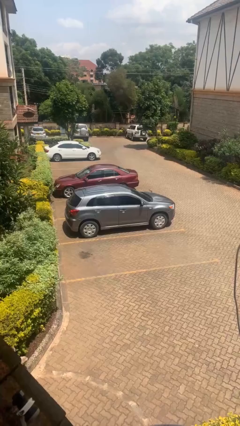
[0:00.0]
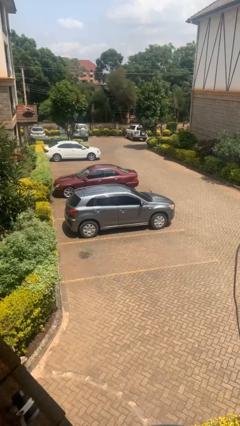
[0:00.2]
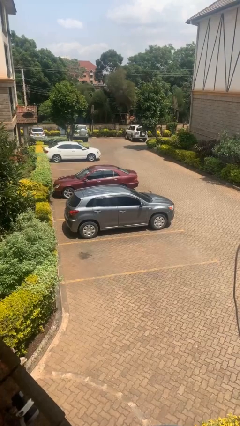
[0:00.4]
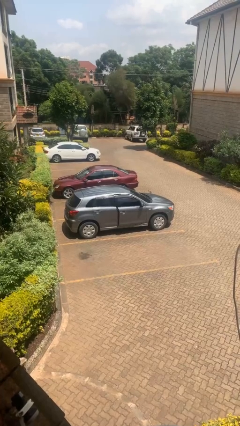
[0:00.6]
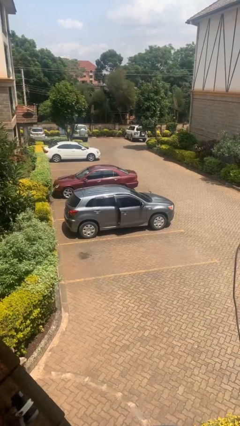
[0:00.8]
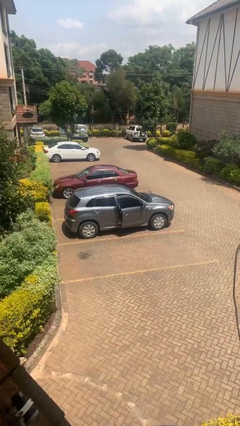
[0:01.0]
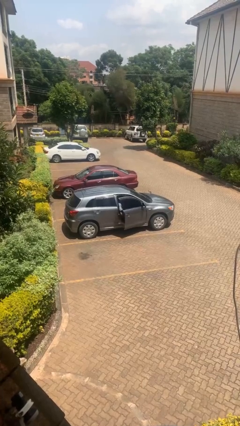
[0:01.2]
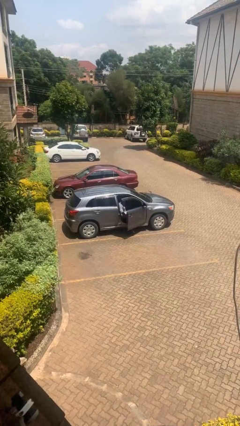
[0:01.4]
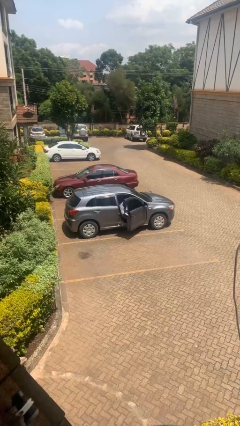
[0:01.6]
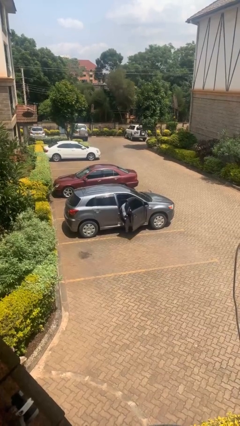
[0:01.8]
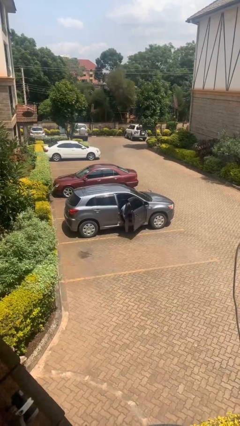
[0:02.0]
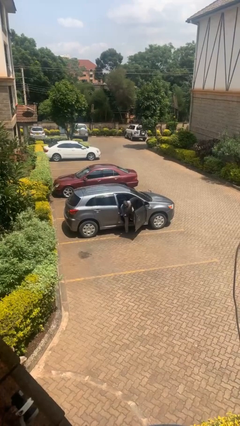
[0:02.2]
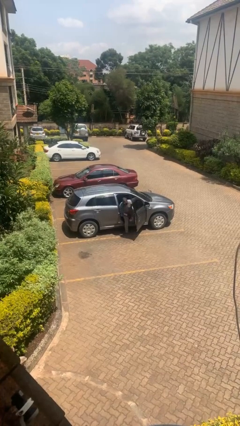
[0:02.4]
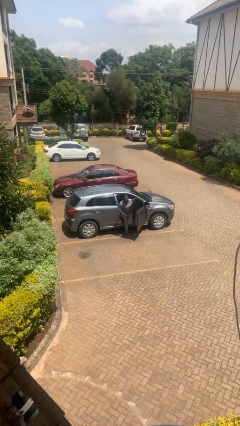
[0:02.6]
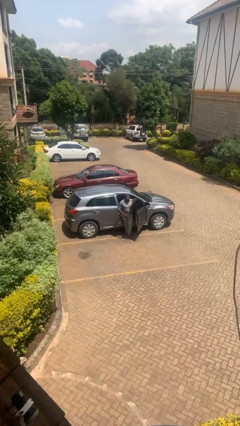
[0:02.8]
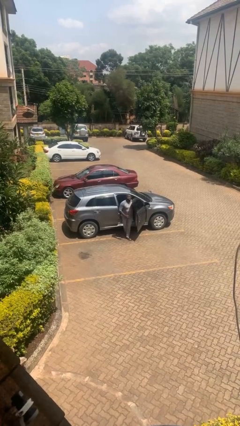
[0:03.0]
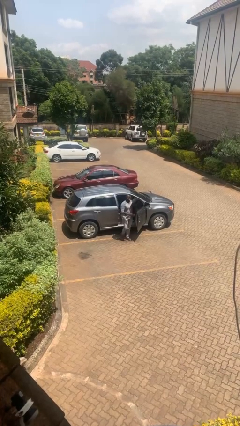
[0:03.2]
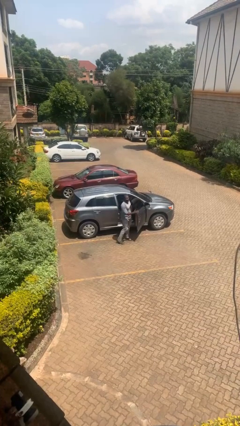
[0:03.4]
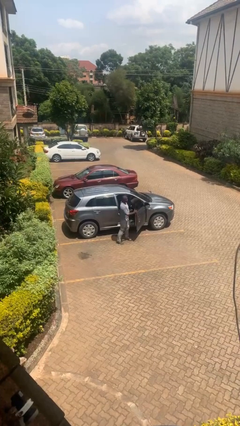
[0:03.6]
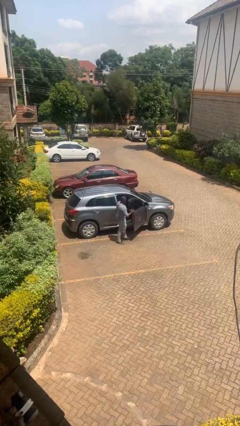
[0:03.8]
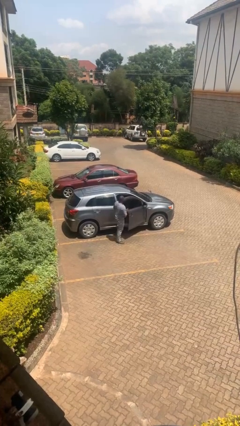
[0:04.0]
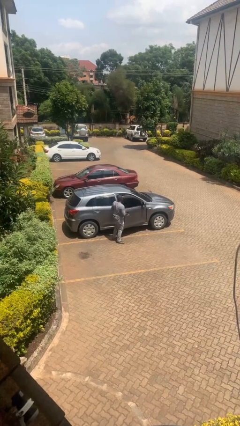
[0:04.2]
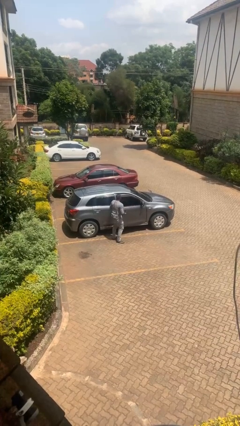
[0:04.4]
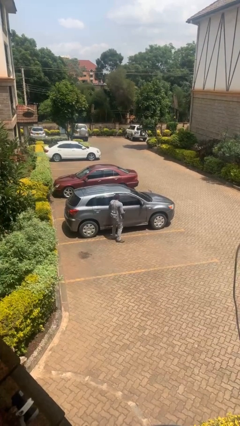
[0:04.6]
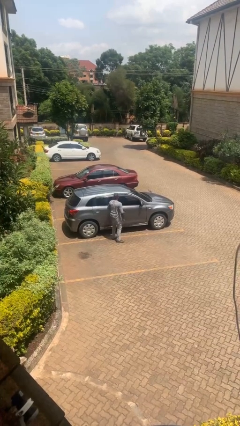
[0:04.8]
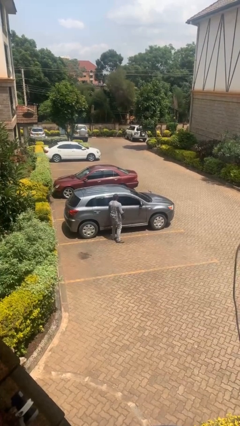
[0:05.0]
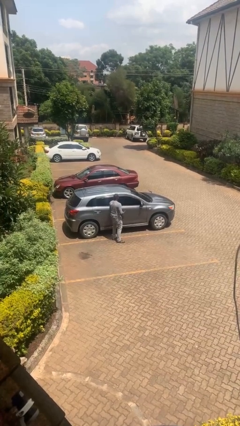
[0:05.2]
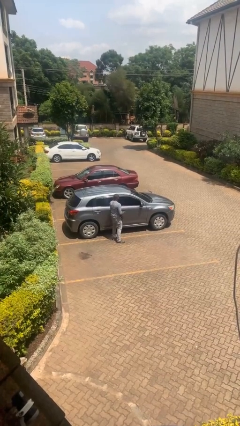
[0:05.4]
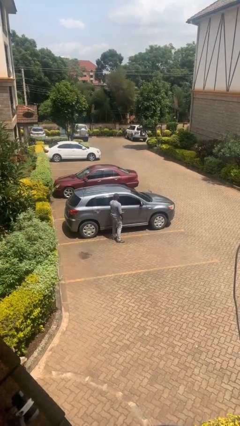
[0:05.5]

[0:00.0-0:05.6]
car drops off person

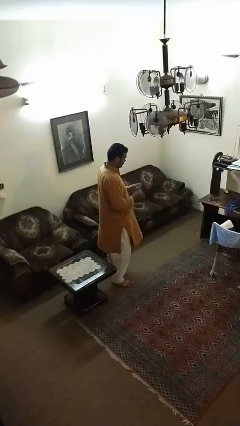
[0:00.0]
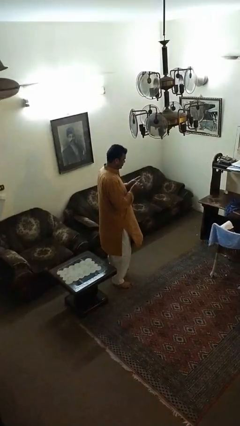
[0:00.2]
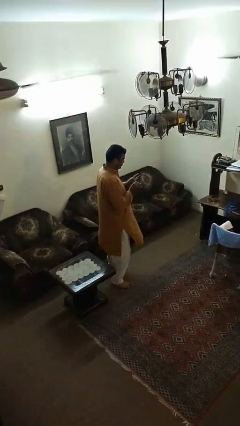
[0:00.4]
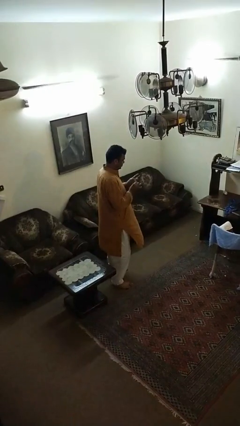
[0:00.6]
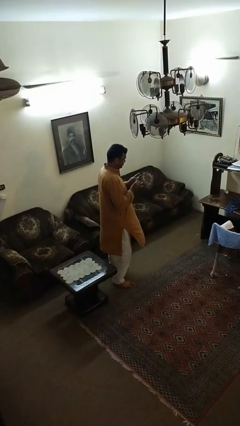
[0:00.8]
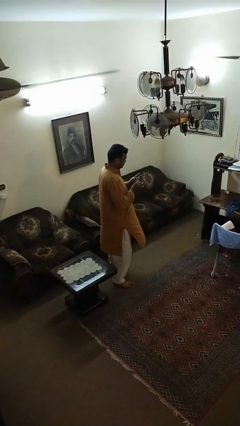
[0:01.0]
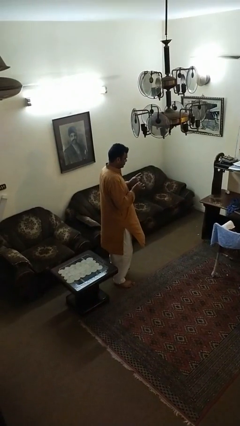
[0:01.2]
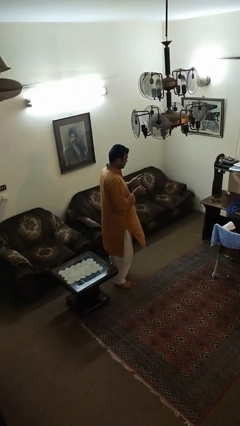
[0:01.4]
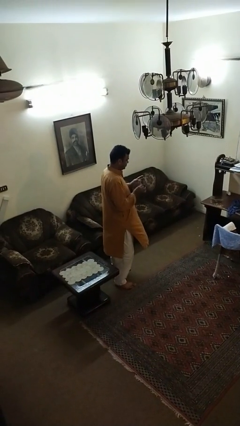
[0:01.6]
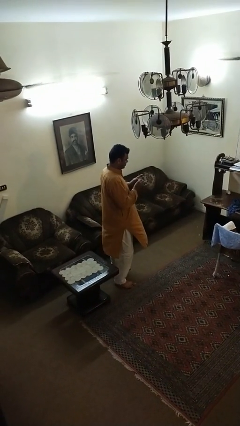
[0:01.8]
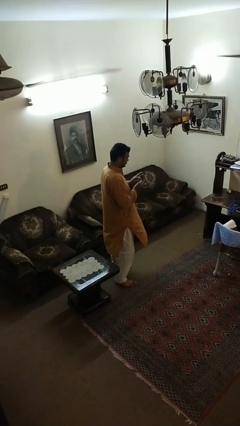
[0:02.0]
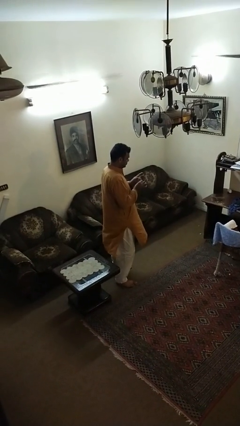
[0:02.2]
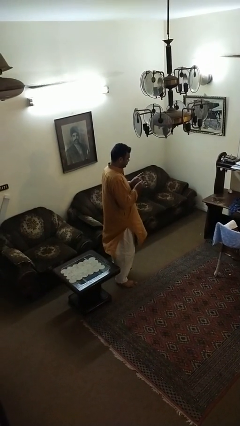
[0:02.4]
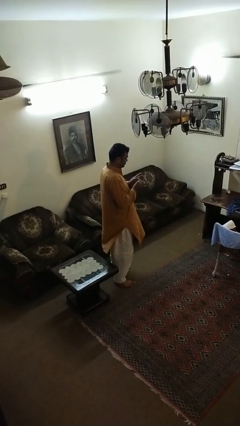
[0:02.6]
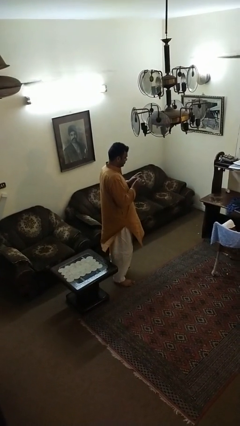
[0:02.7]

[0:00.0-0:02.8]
person files fingernails

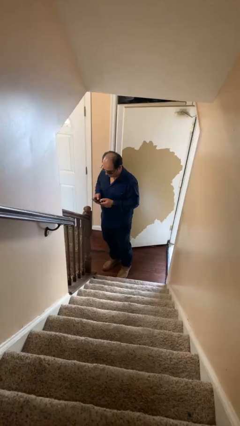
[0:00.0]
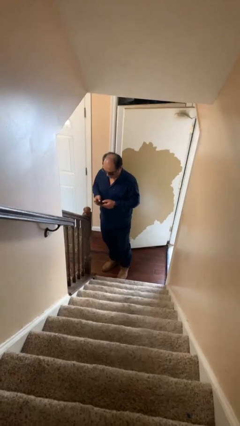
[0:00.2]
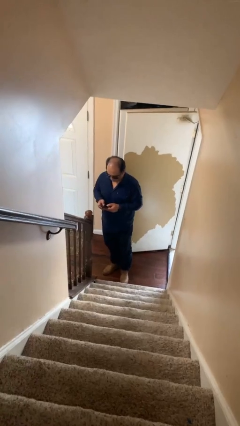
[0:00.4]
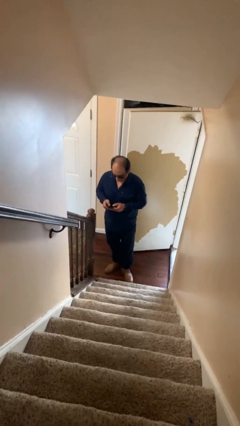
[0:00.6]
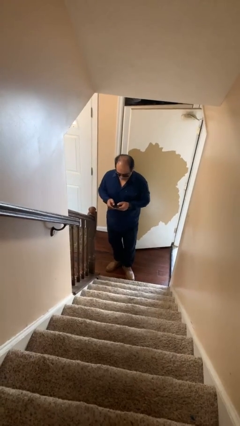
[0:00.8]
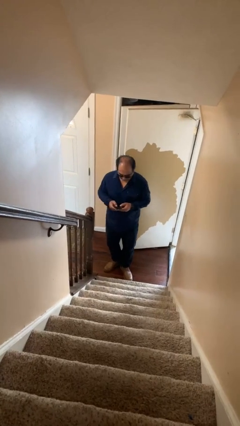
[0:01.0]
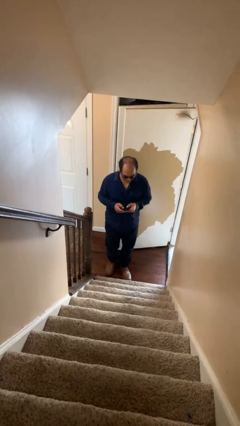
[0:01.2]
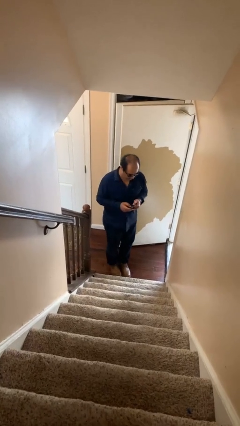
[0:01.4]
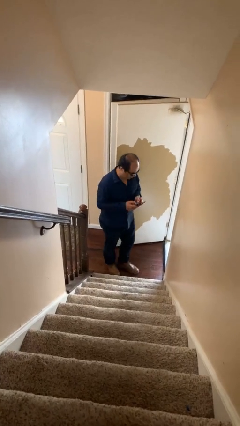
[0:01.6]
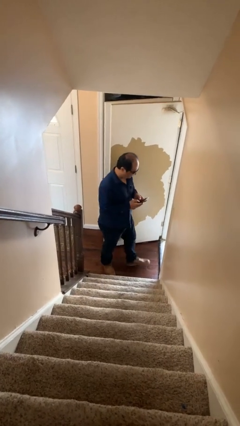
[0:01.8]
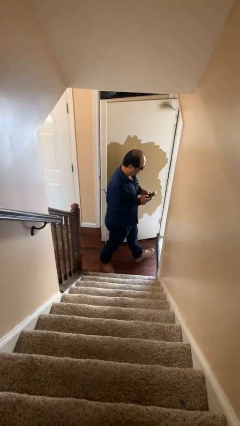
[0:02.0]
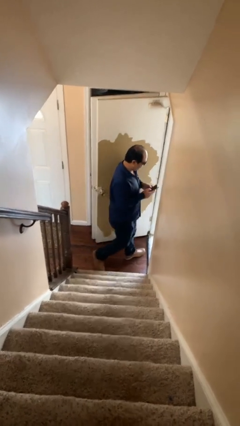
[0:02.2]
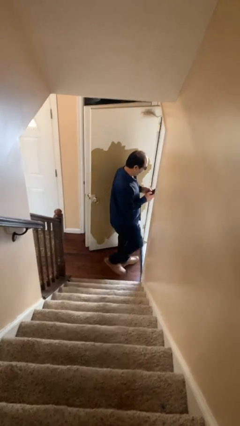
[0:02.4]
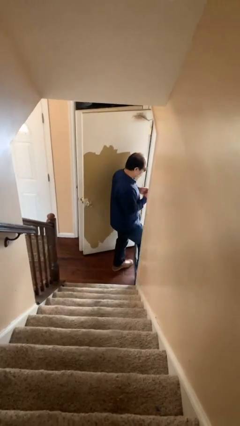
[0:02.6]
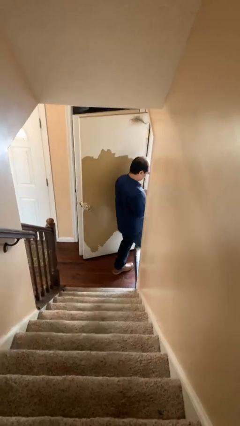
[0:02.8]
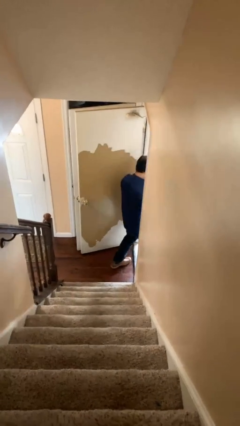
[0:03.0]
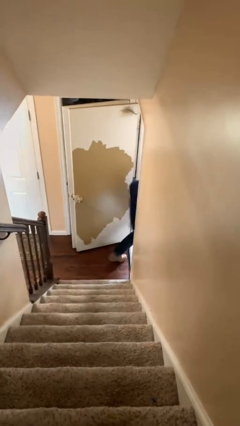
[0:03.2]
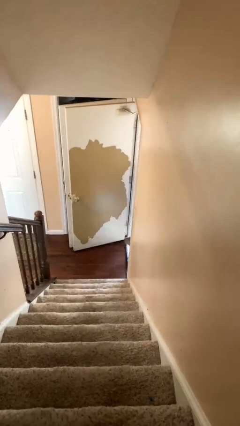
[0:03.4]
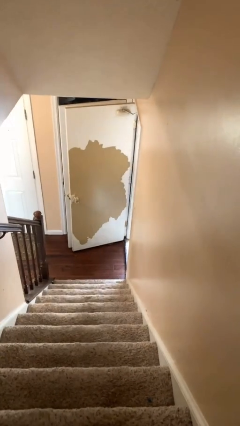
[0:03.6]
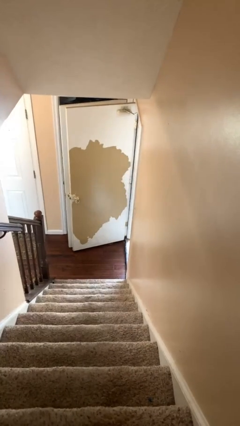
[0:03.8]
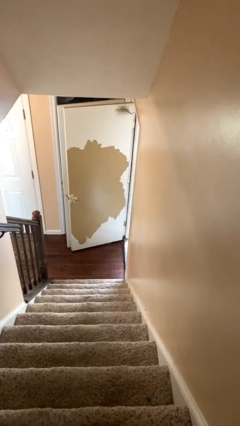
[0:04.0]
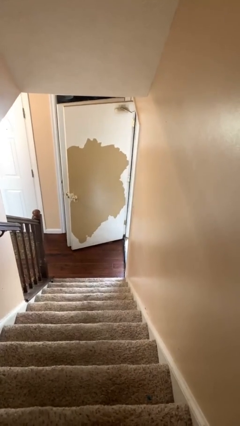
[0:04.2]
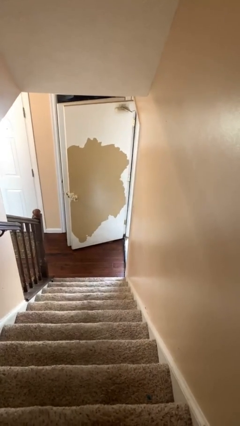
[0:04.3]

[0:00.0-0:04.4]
person exits scene through structure

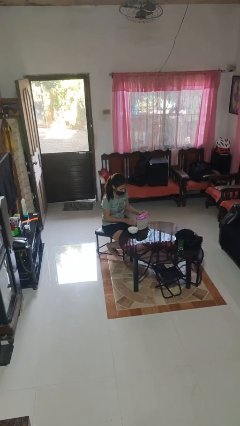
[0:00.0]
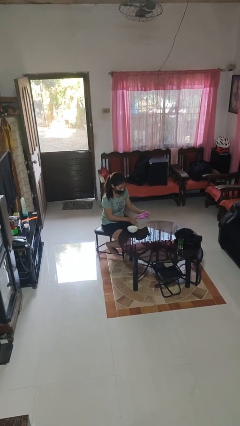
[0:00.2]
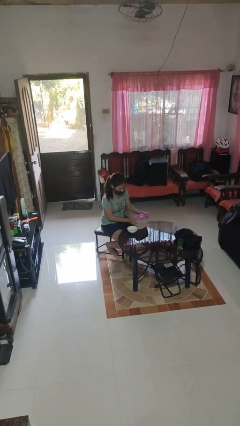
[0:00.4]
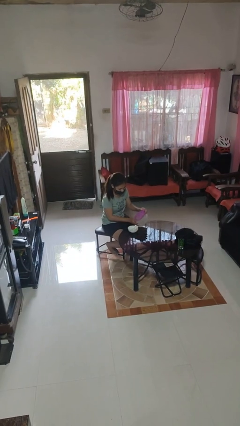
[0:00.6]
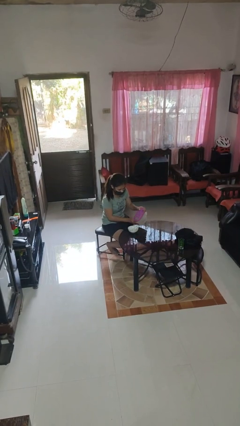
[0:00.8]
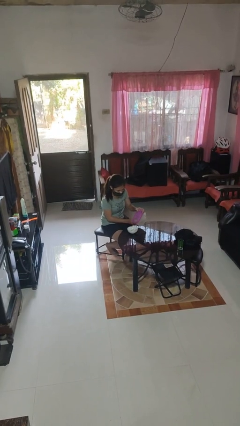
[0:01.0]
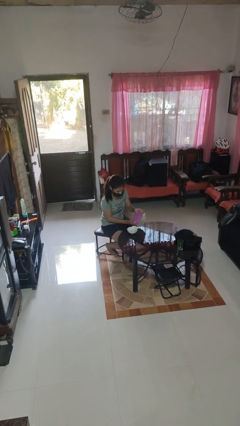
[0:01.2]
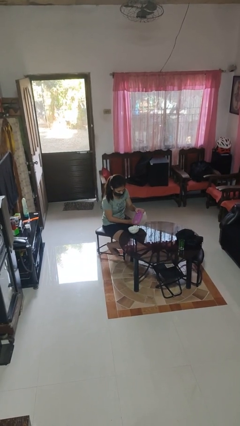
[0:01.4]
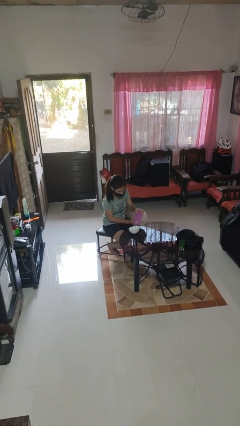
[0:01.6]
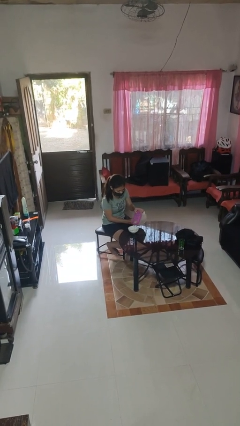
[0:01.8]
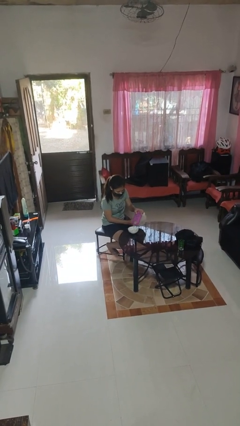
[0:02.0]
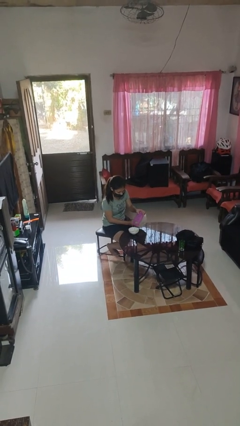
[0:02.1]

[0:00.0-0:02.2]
person pours into bowl

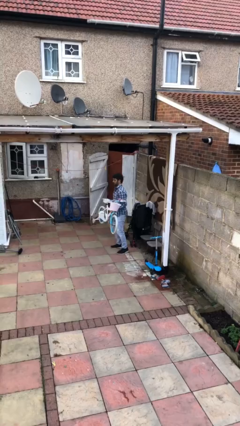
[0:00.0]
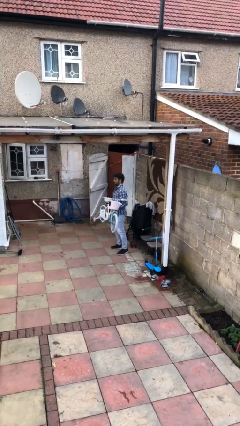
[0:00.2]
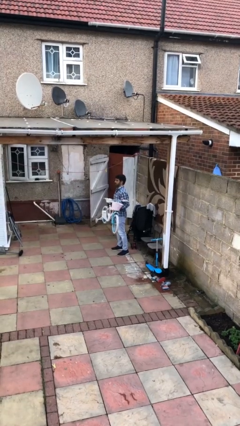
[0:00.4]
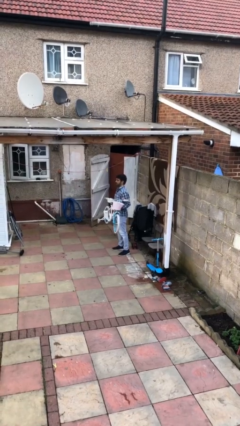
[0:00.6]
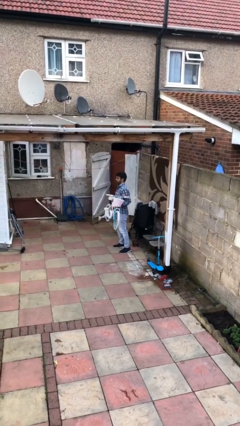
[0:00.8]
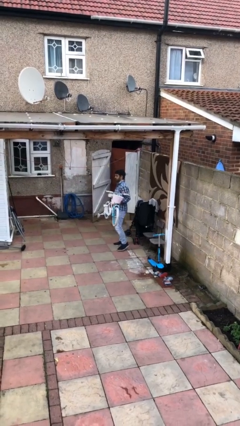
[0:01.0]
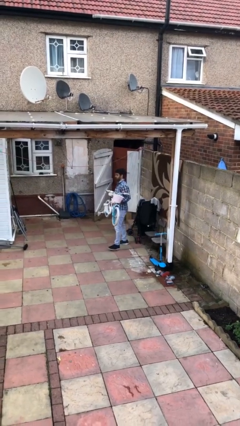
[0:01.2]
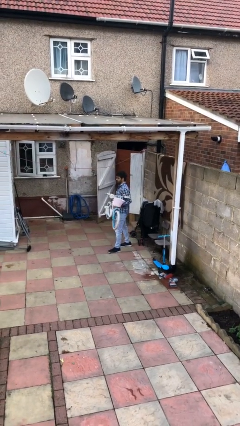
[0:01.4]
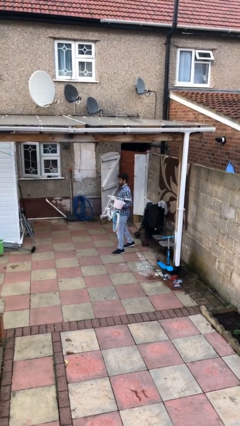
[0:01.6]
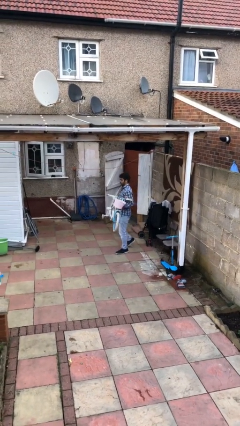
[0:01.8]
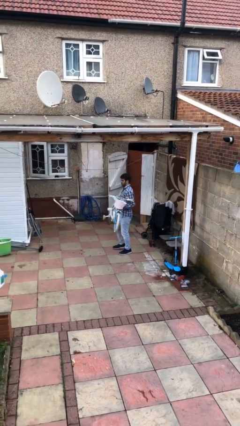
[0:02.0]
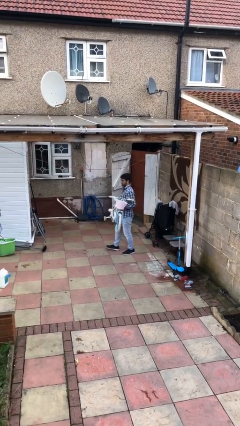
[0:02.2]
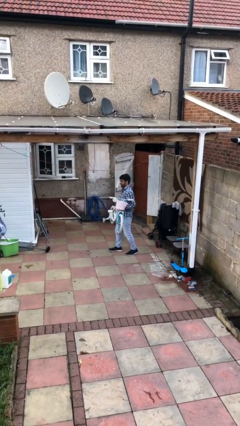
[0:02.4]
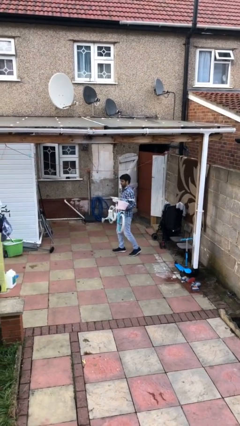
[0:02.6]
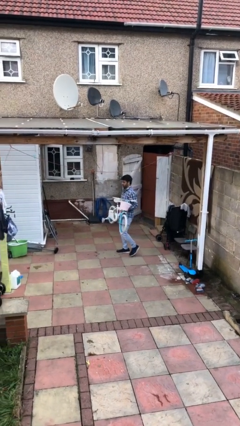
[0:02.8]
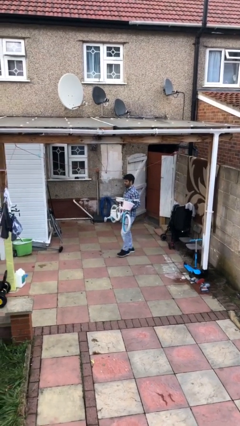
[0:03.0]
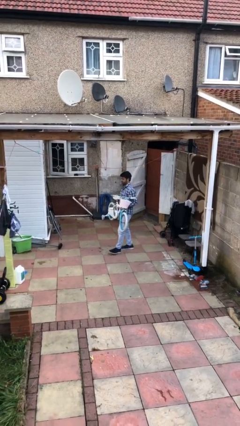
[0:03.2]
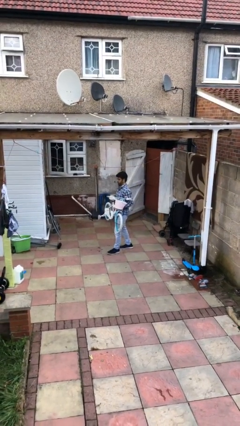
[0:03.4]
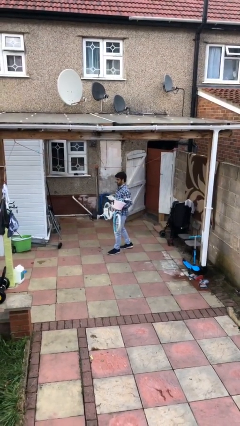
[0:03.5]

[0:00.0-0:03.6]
person carries heavy object
